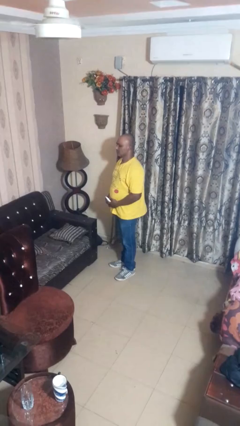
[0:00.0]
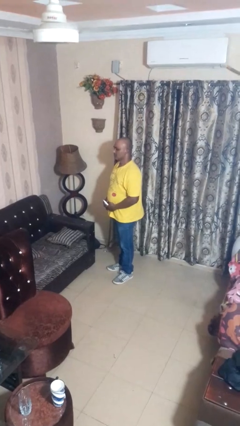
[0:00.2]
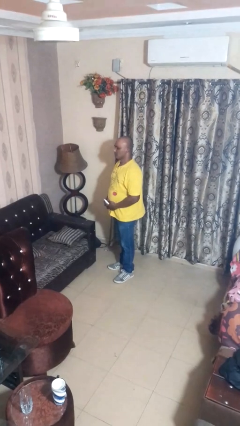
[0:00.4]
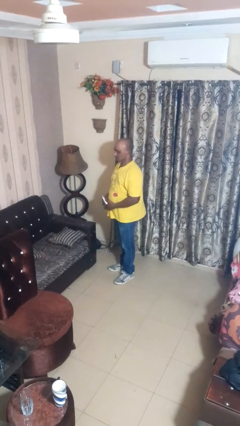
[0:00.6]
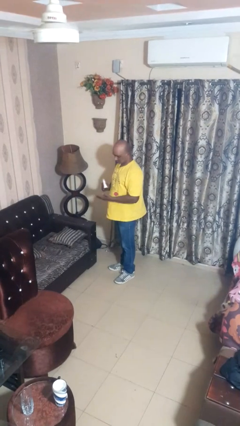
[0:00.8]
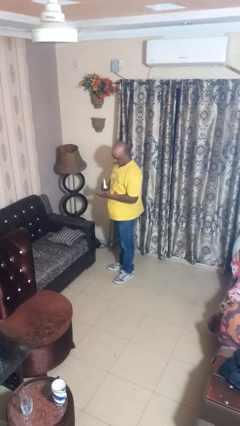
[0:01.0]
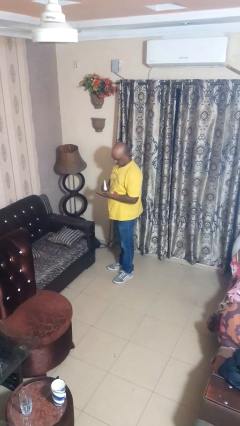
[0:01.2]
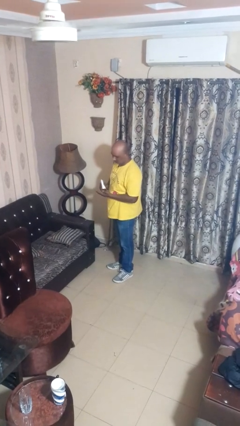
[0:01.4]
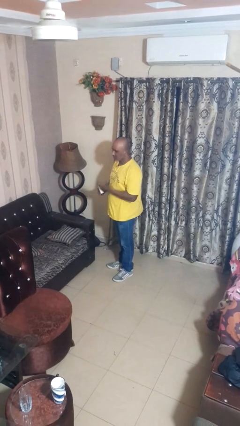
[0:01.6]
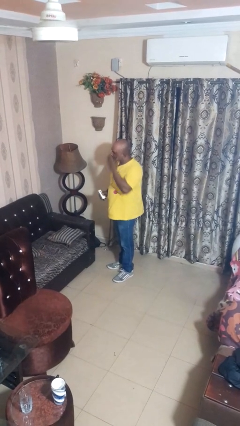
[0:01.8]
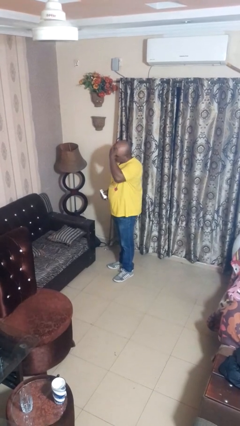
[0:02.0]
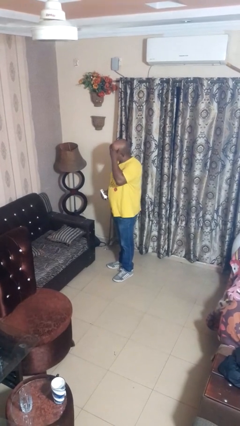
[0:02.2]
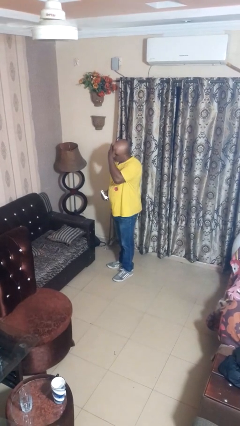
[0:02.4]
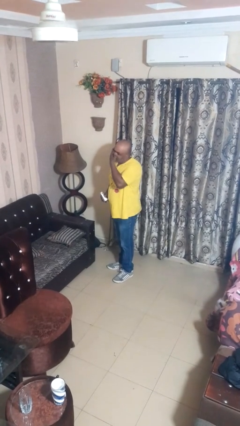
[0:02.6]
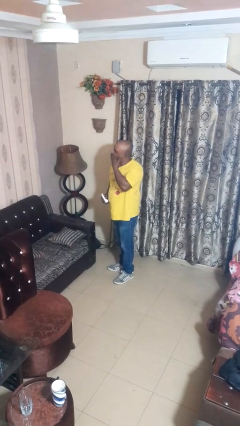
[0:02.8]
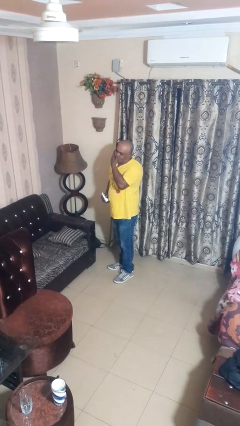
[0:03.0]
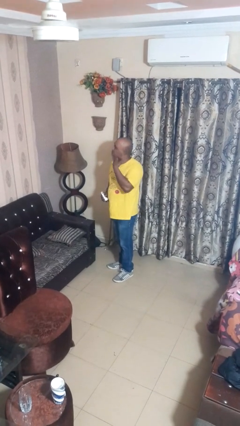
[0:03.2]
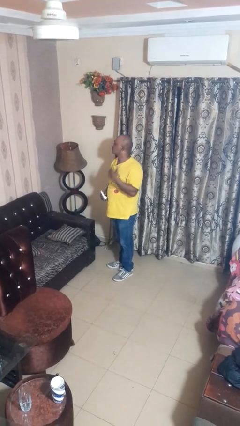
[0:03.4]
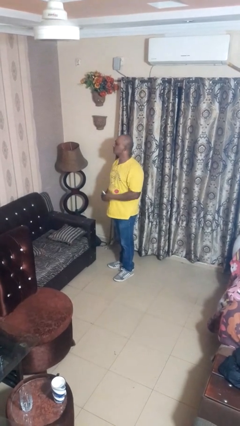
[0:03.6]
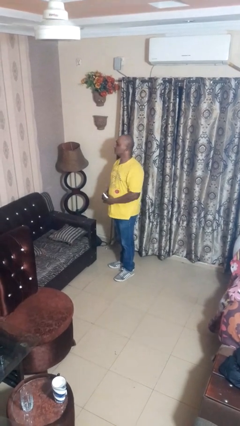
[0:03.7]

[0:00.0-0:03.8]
person applies facial moisturizer

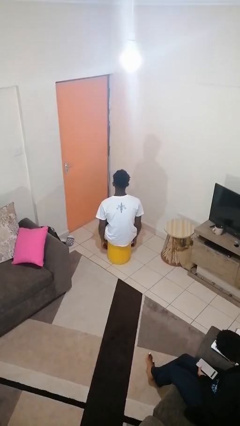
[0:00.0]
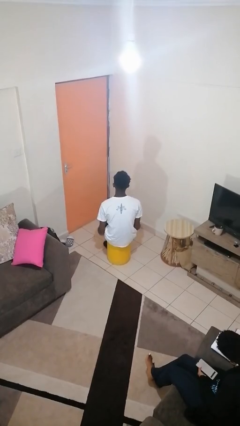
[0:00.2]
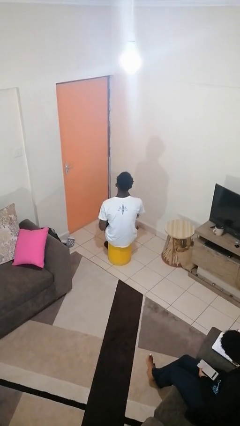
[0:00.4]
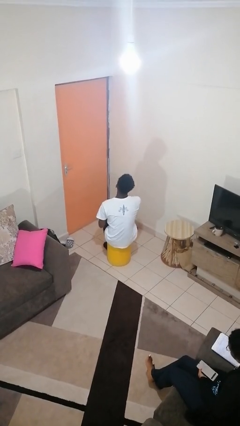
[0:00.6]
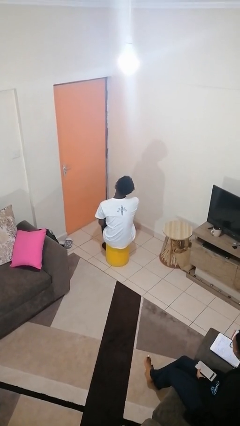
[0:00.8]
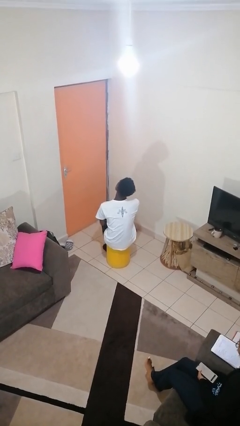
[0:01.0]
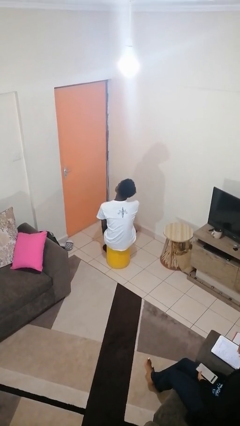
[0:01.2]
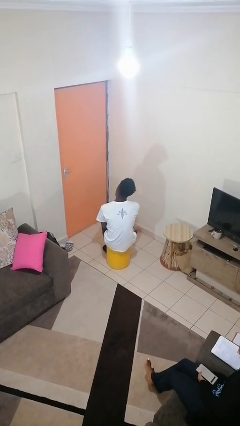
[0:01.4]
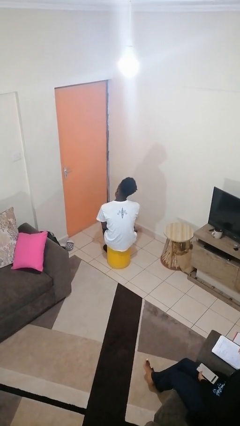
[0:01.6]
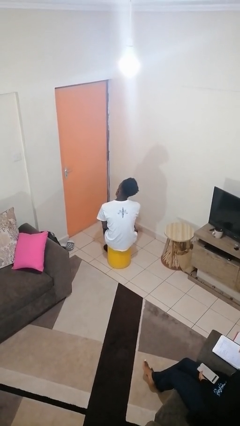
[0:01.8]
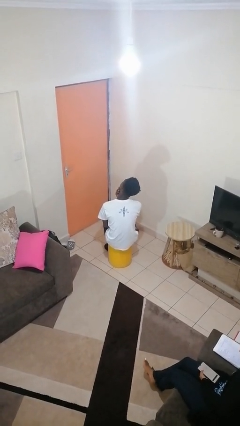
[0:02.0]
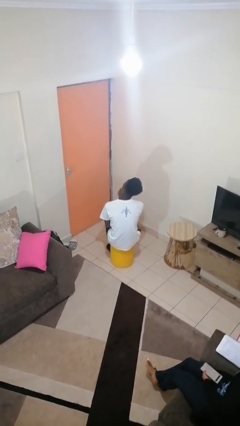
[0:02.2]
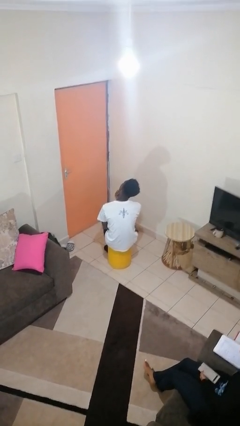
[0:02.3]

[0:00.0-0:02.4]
person strokes chin

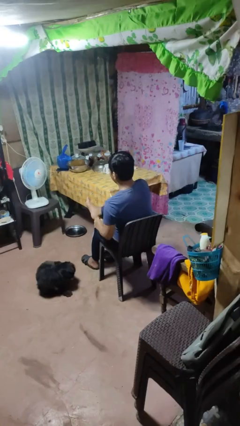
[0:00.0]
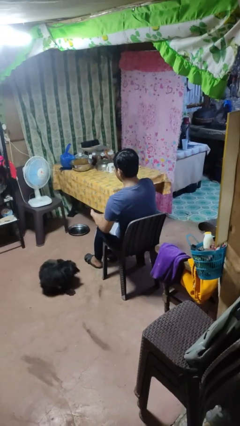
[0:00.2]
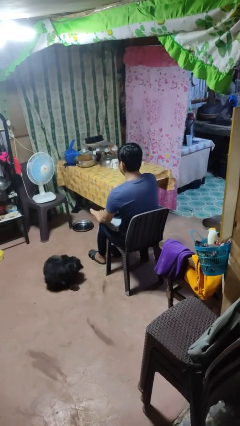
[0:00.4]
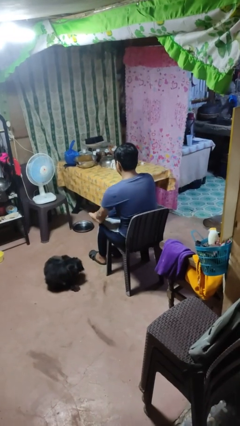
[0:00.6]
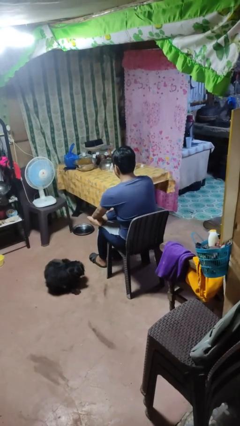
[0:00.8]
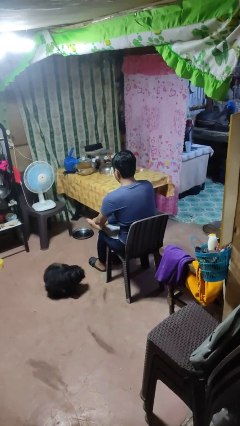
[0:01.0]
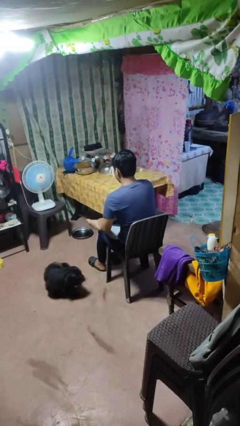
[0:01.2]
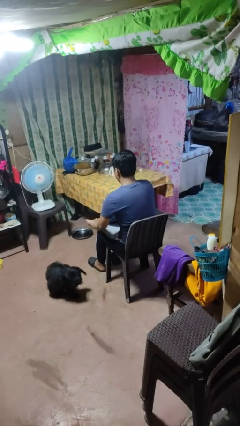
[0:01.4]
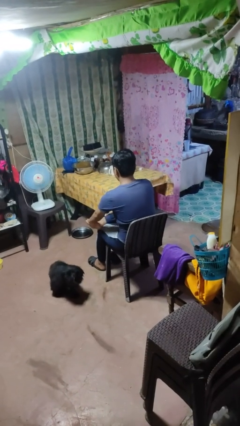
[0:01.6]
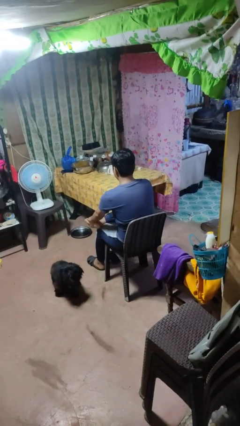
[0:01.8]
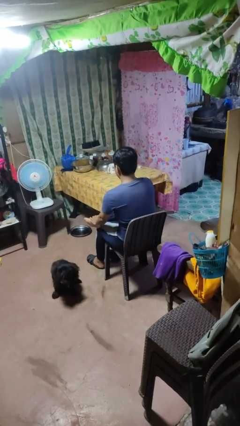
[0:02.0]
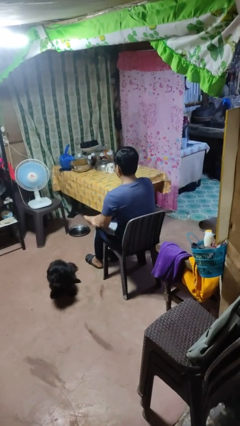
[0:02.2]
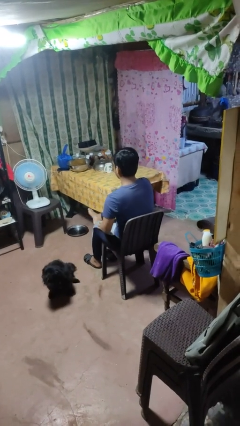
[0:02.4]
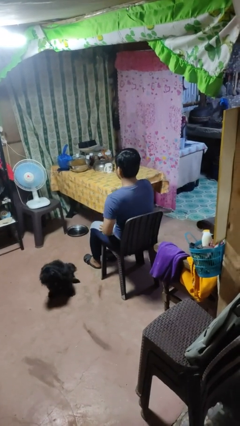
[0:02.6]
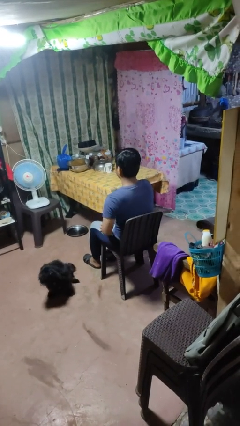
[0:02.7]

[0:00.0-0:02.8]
person rubs foot

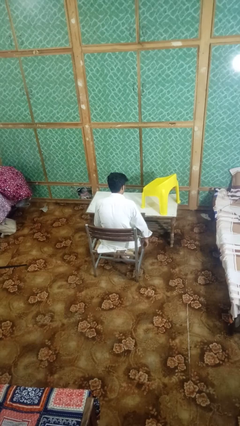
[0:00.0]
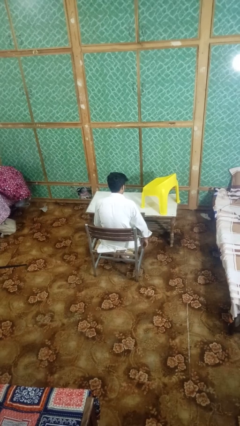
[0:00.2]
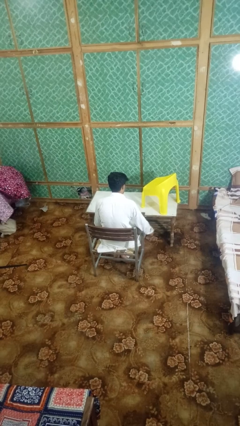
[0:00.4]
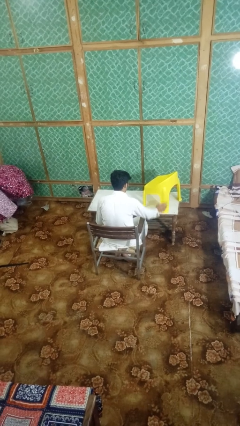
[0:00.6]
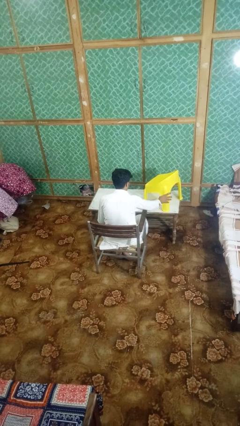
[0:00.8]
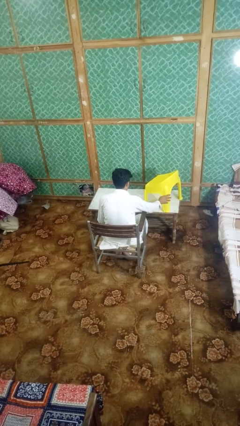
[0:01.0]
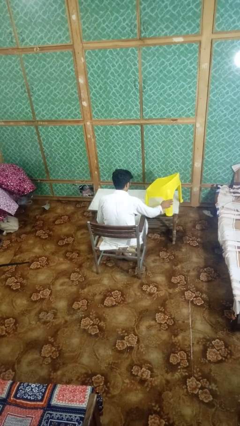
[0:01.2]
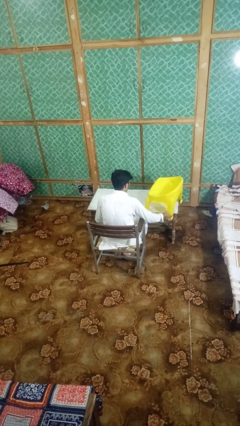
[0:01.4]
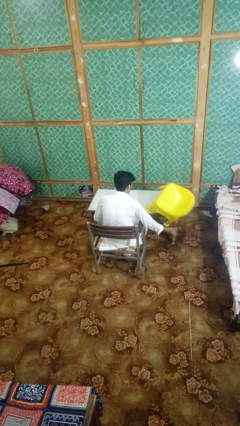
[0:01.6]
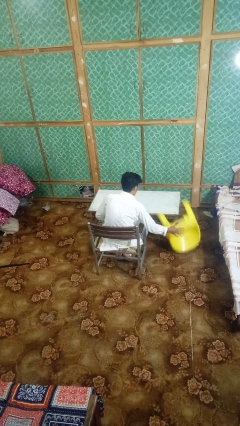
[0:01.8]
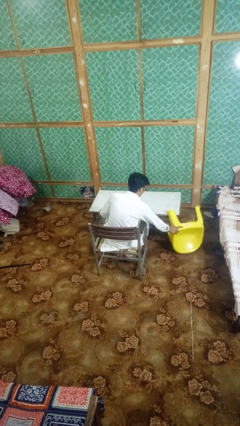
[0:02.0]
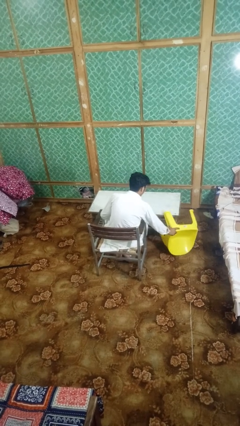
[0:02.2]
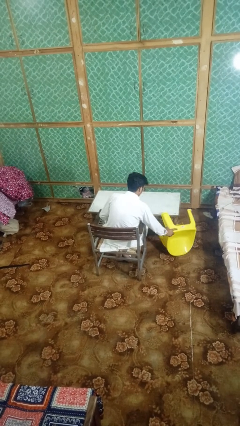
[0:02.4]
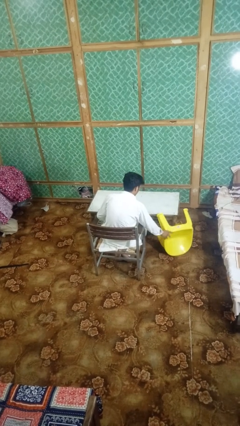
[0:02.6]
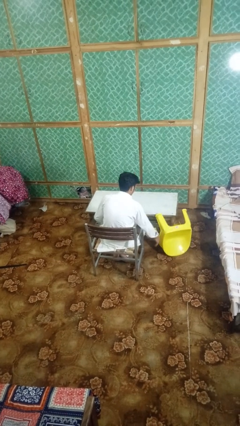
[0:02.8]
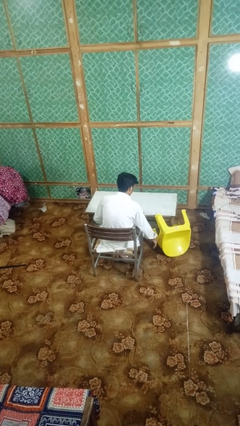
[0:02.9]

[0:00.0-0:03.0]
person knocks over furniture

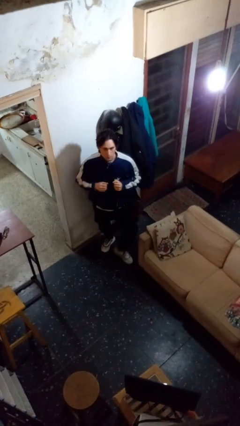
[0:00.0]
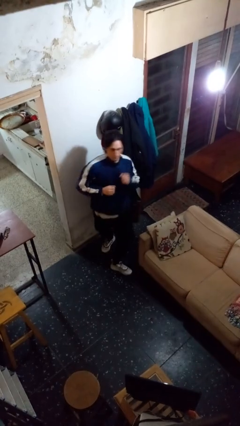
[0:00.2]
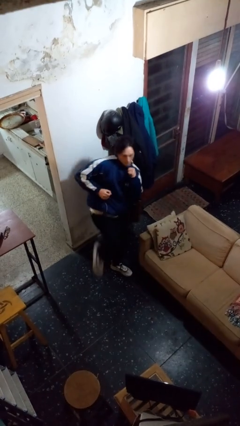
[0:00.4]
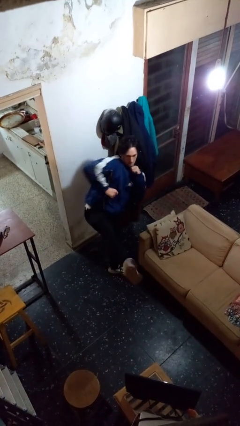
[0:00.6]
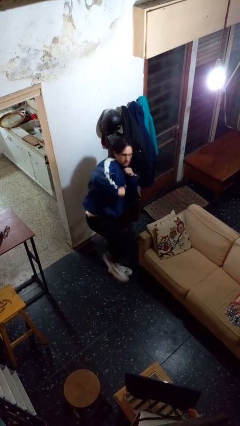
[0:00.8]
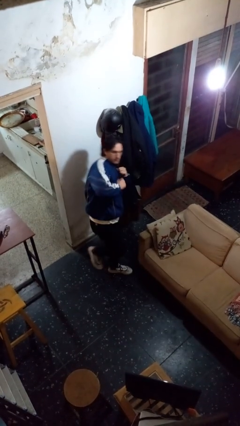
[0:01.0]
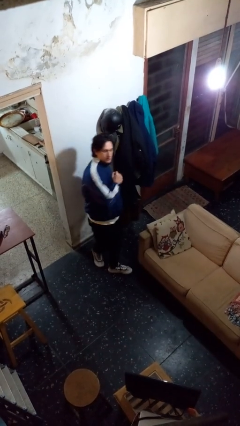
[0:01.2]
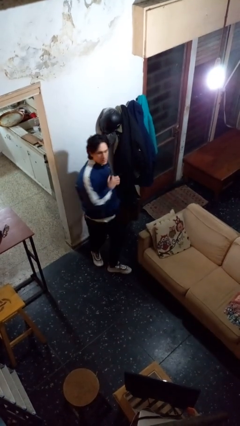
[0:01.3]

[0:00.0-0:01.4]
person karate kicks

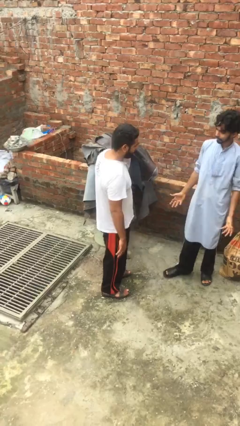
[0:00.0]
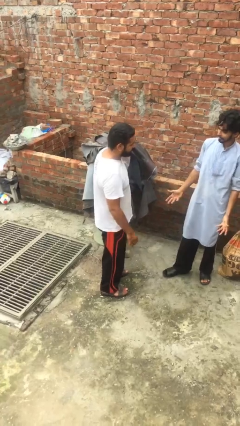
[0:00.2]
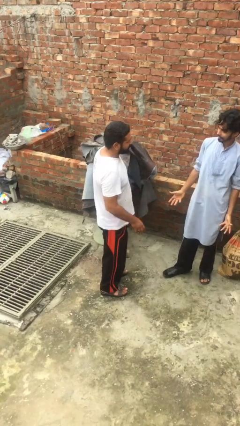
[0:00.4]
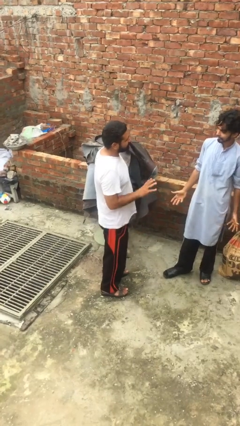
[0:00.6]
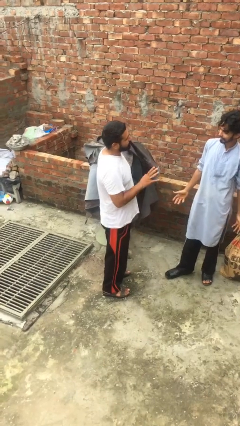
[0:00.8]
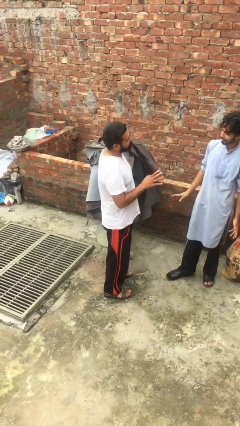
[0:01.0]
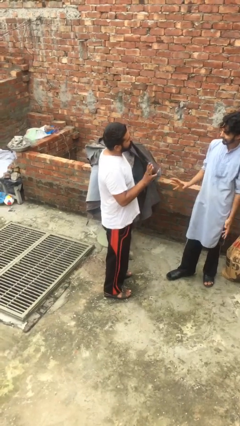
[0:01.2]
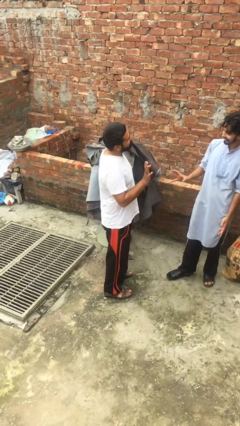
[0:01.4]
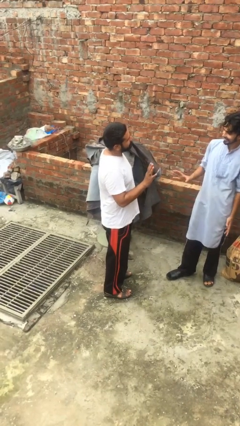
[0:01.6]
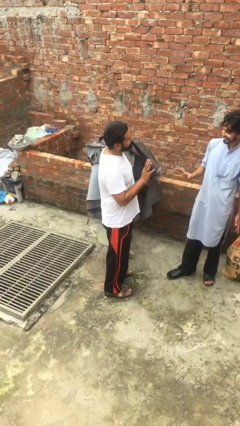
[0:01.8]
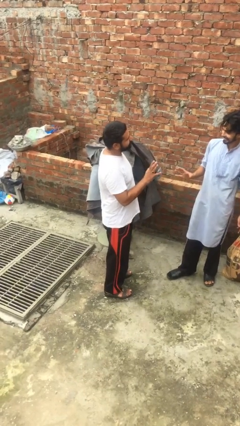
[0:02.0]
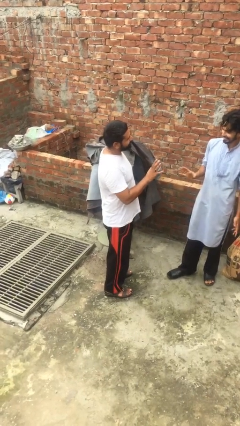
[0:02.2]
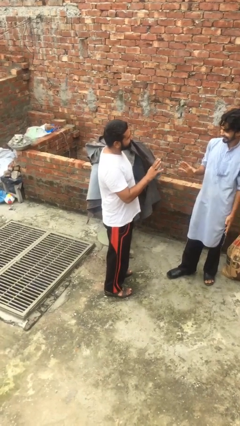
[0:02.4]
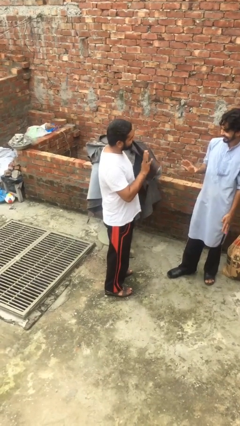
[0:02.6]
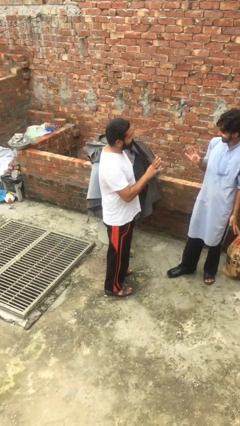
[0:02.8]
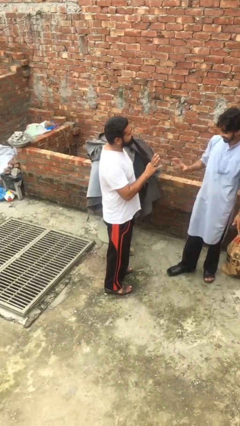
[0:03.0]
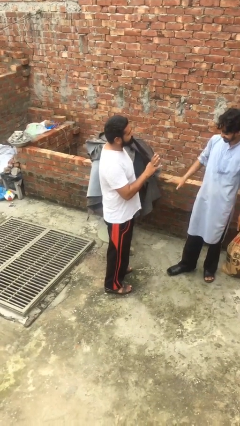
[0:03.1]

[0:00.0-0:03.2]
person talks to person

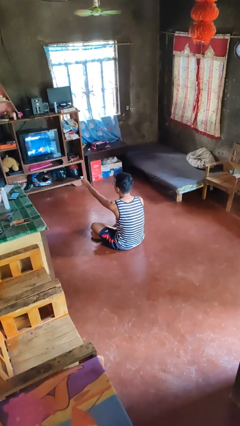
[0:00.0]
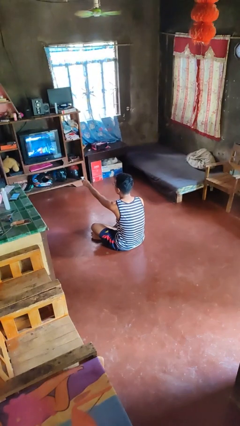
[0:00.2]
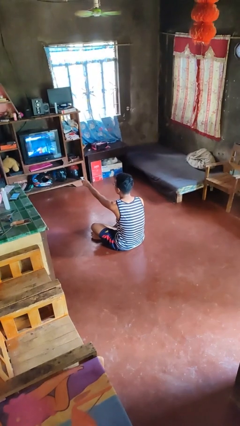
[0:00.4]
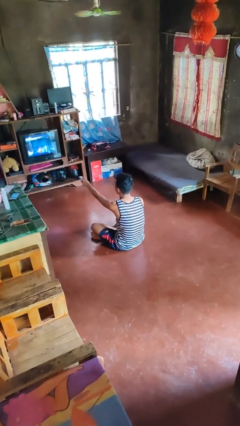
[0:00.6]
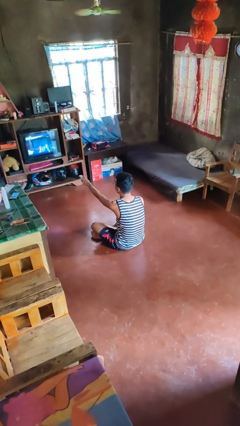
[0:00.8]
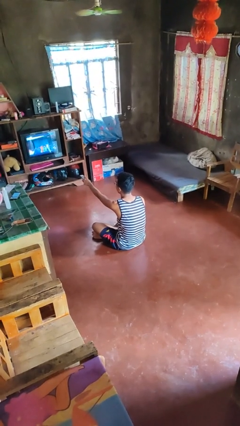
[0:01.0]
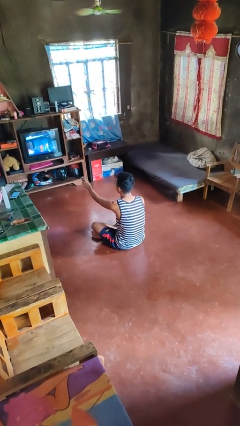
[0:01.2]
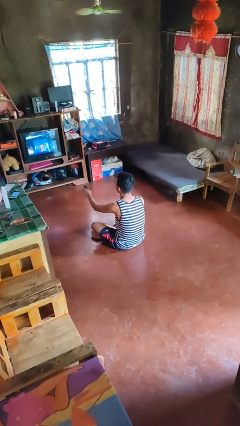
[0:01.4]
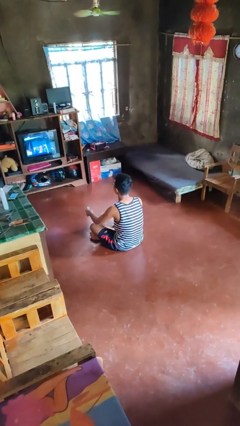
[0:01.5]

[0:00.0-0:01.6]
person uses television remote
